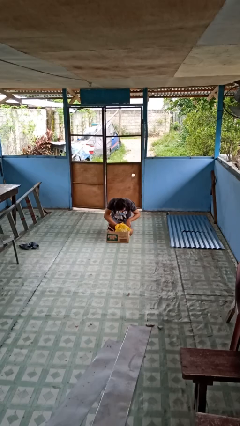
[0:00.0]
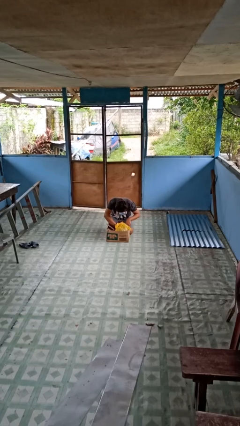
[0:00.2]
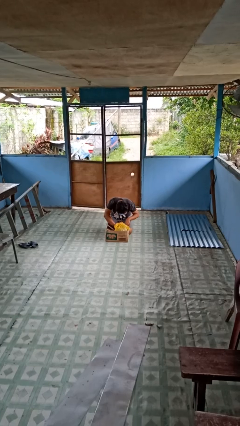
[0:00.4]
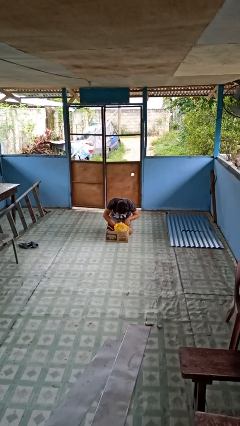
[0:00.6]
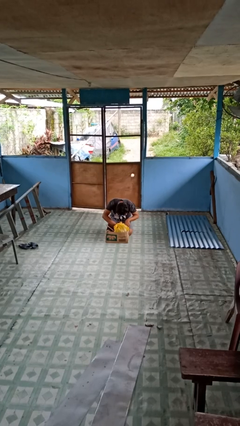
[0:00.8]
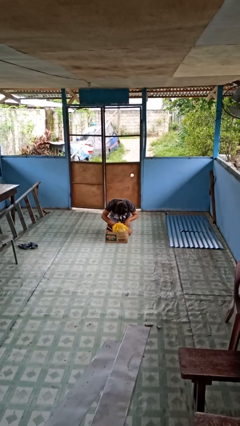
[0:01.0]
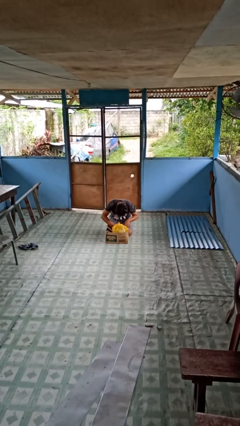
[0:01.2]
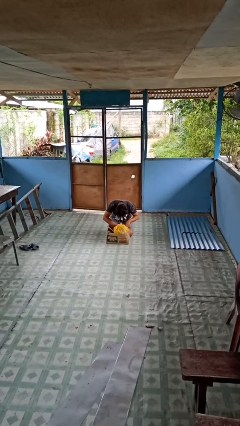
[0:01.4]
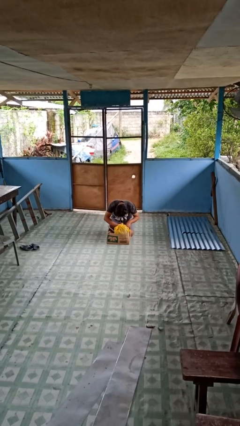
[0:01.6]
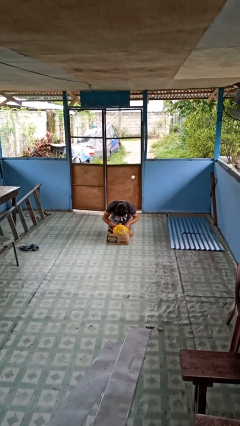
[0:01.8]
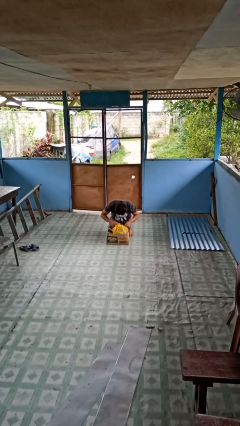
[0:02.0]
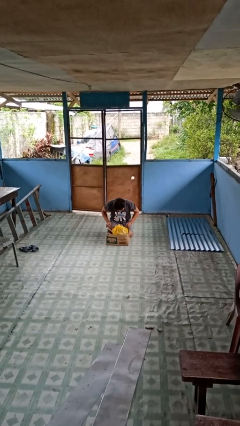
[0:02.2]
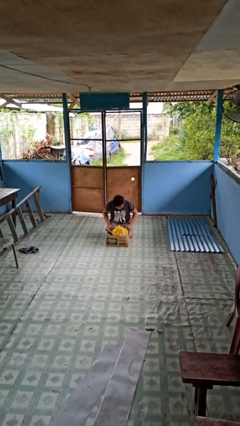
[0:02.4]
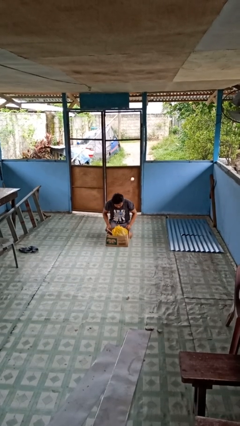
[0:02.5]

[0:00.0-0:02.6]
person searches in box

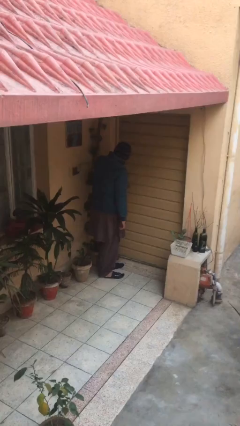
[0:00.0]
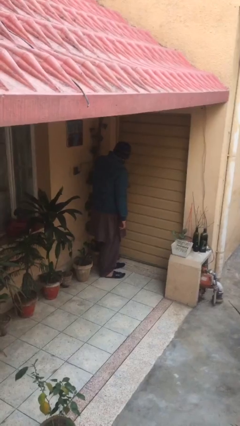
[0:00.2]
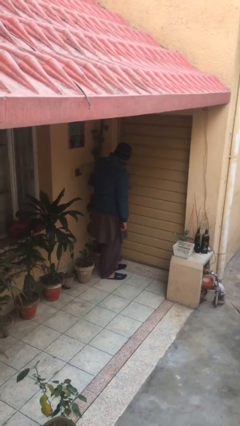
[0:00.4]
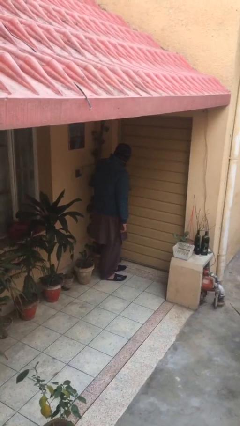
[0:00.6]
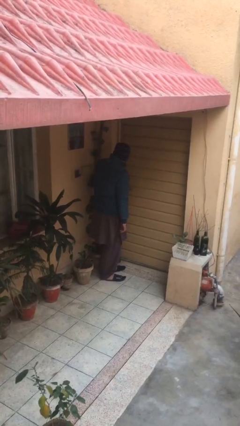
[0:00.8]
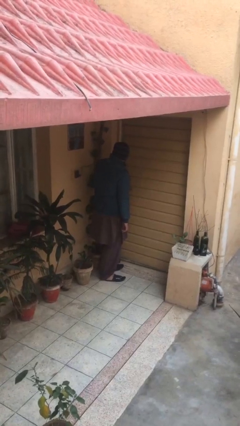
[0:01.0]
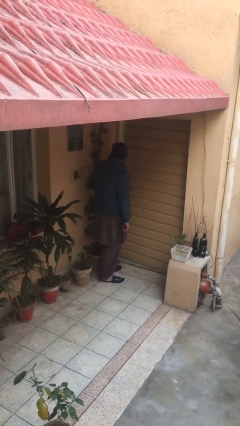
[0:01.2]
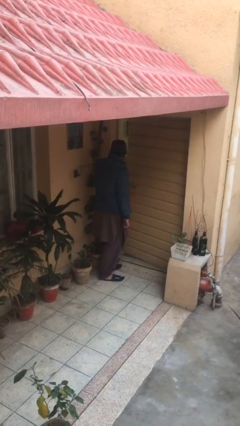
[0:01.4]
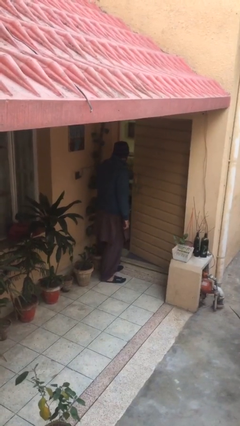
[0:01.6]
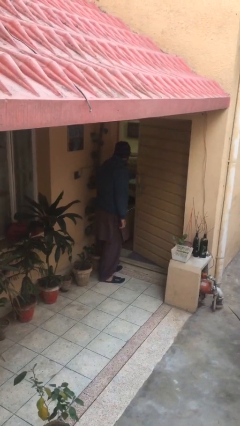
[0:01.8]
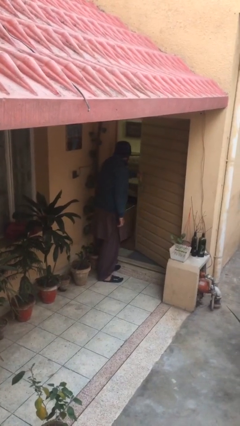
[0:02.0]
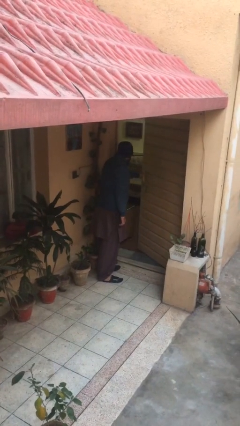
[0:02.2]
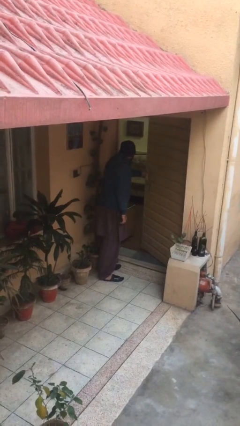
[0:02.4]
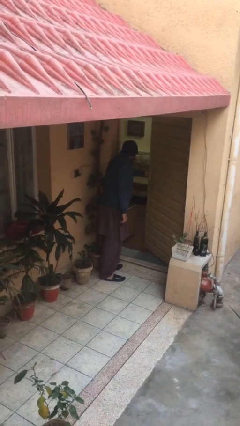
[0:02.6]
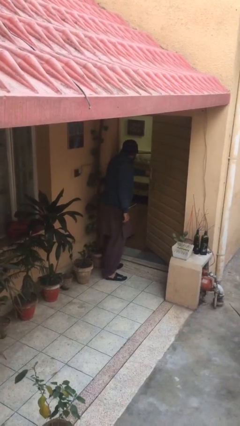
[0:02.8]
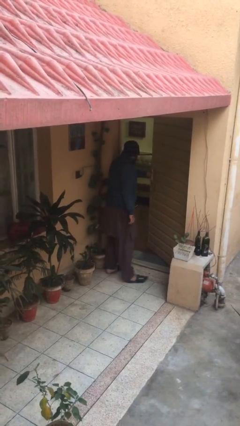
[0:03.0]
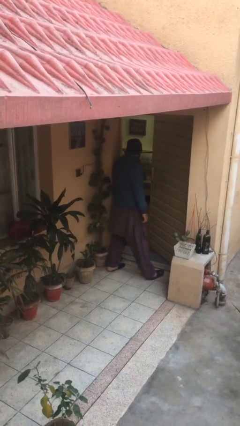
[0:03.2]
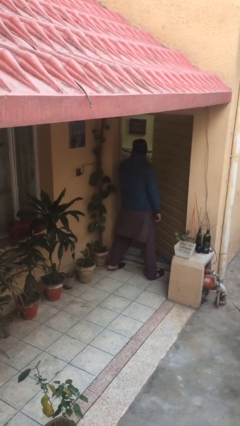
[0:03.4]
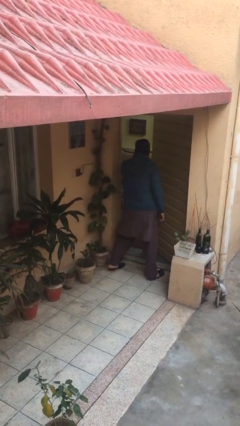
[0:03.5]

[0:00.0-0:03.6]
person opens facility door

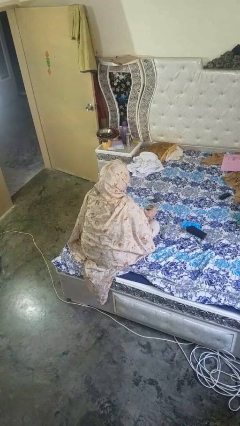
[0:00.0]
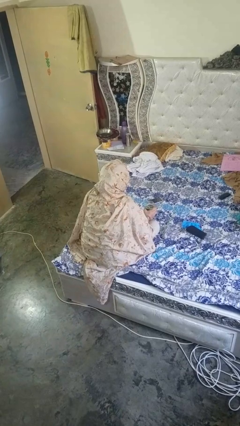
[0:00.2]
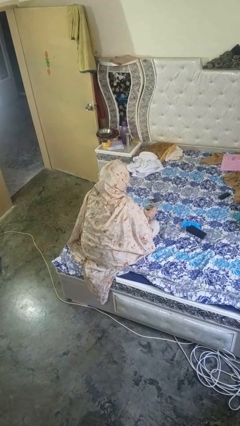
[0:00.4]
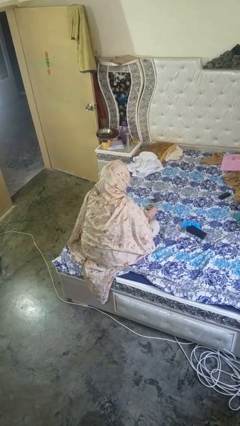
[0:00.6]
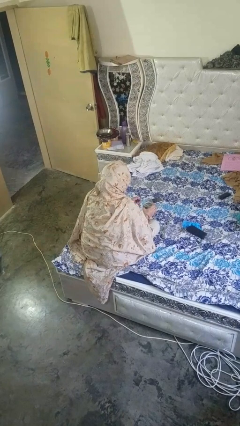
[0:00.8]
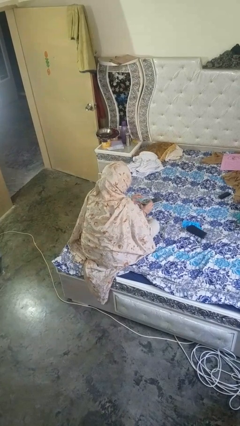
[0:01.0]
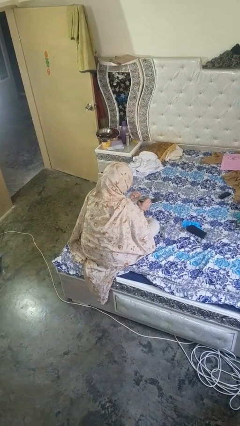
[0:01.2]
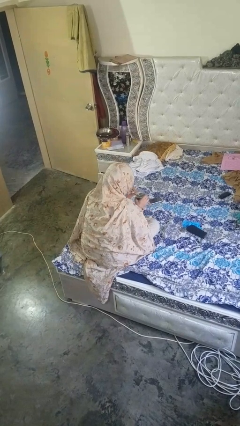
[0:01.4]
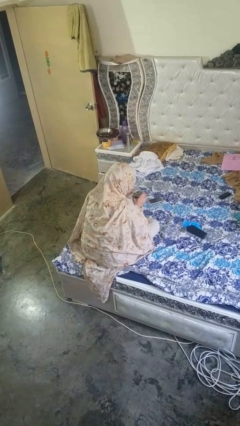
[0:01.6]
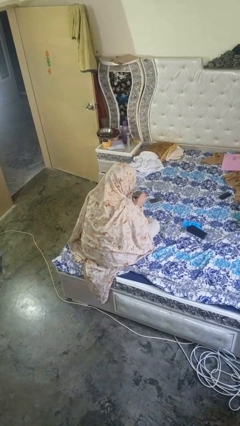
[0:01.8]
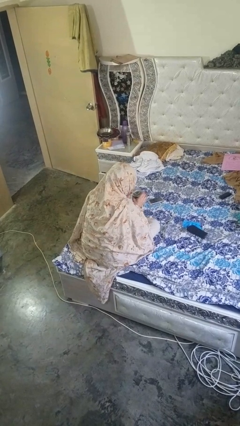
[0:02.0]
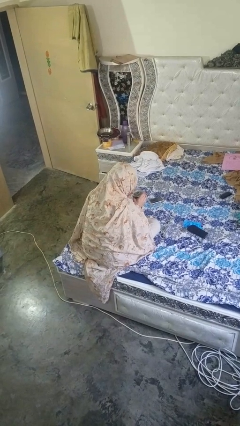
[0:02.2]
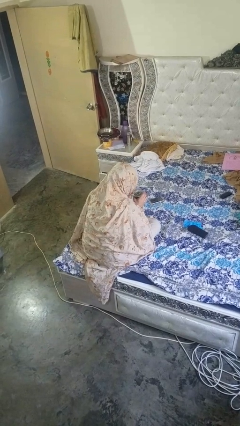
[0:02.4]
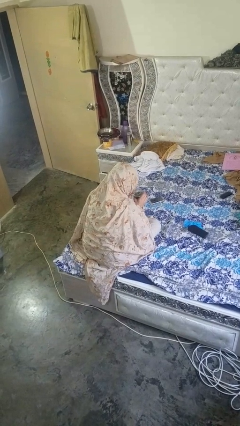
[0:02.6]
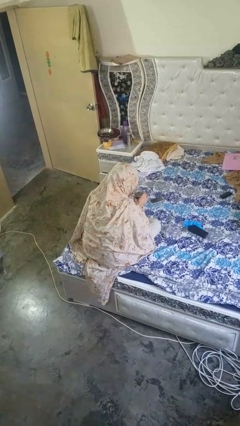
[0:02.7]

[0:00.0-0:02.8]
person drinks from straw

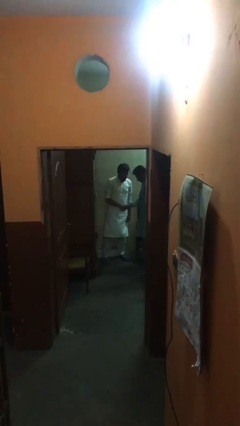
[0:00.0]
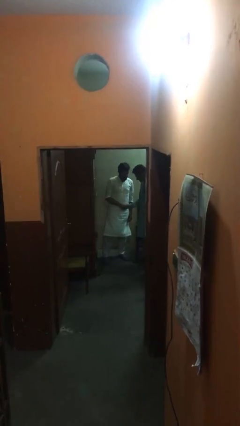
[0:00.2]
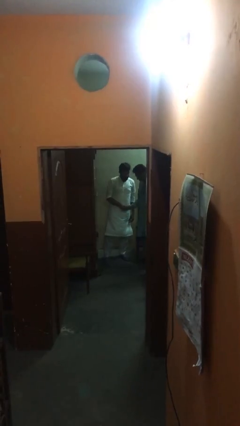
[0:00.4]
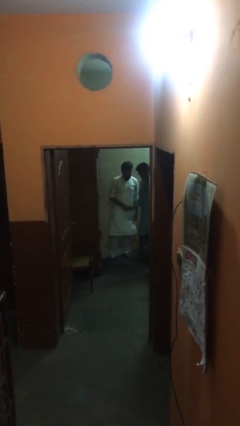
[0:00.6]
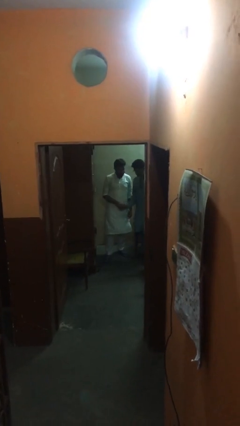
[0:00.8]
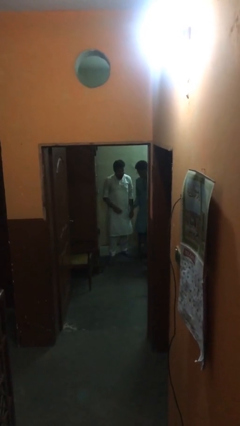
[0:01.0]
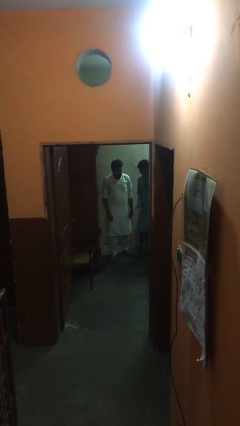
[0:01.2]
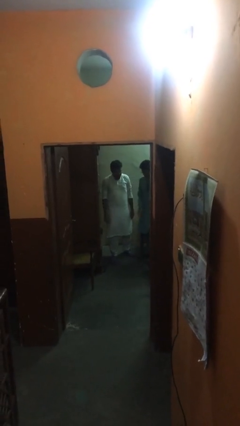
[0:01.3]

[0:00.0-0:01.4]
person shakes hand

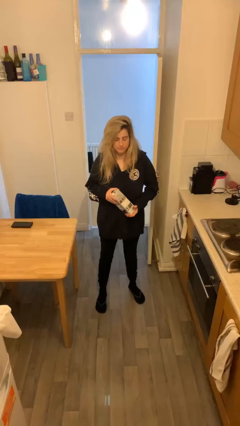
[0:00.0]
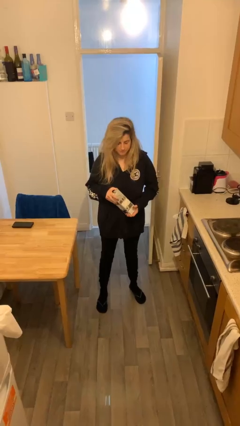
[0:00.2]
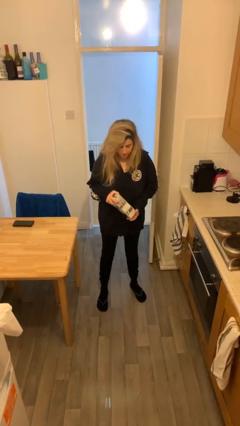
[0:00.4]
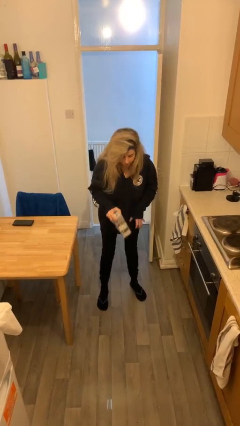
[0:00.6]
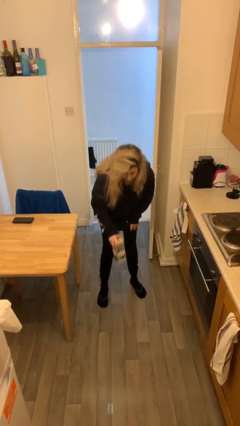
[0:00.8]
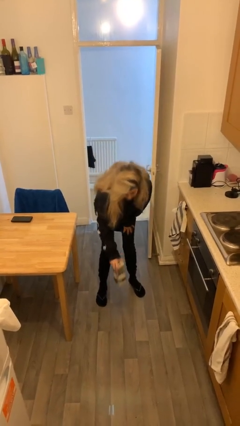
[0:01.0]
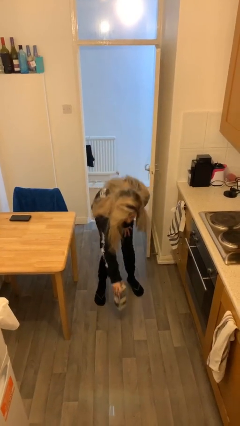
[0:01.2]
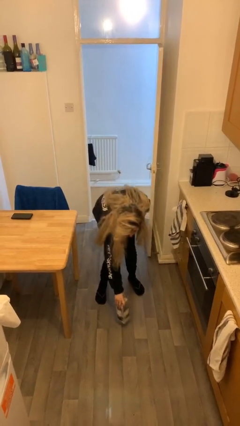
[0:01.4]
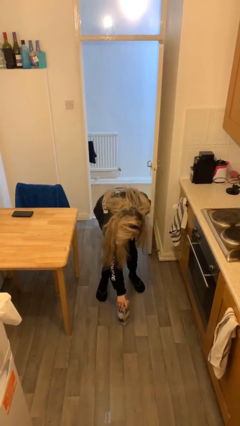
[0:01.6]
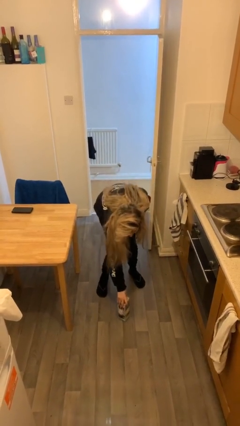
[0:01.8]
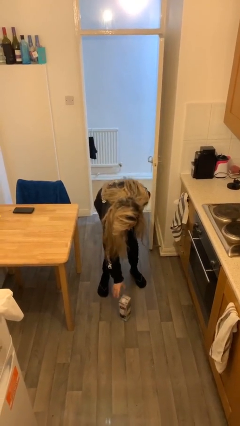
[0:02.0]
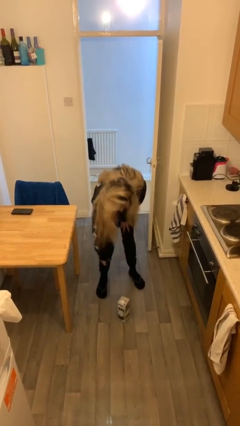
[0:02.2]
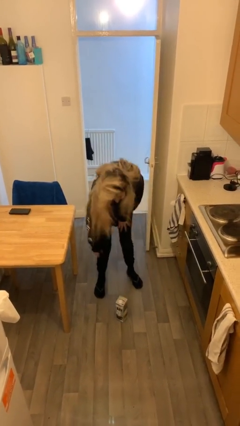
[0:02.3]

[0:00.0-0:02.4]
person puts down object on floor

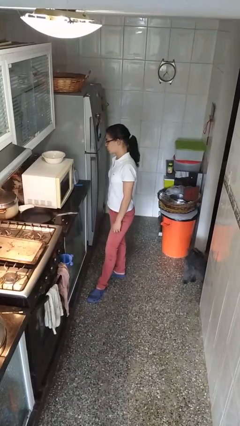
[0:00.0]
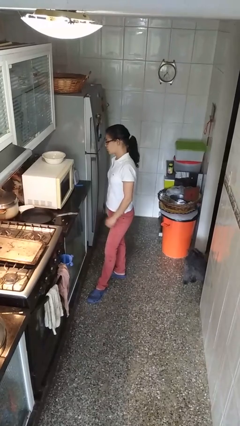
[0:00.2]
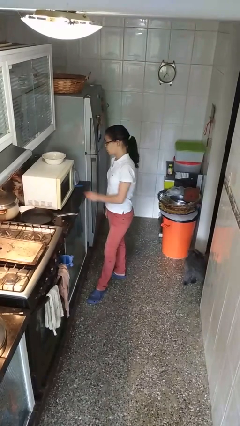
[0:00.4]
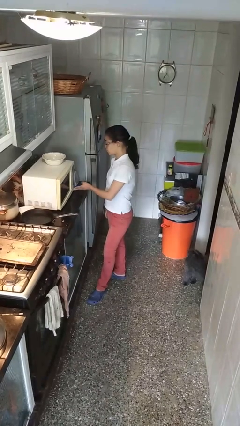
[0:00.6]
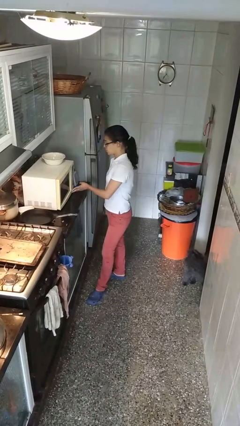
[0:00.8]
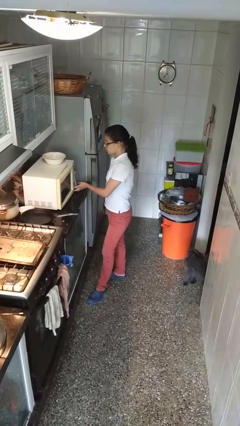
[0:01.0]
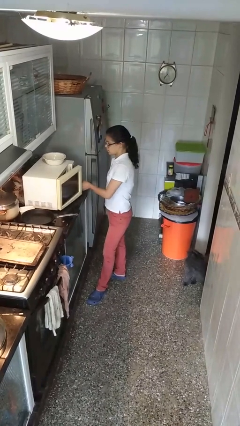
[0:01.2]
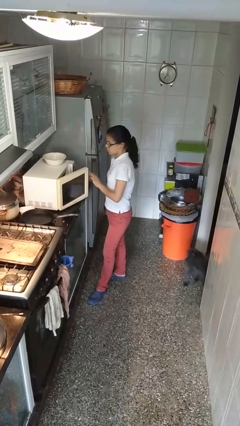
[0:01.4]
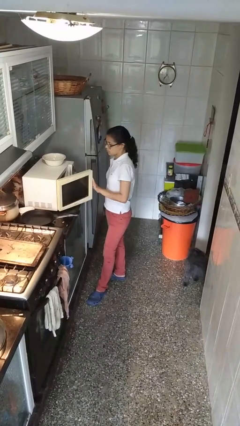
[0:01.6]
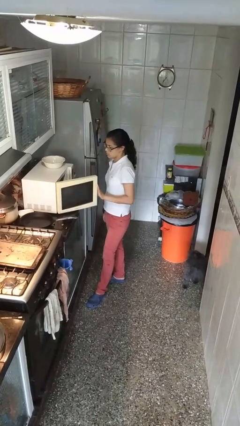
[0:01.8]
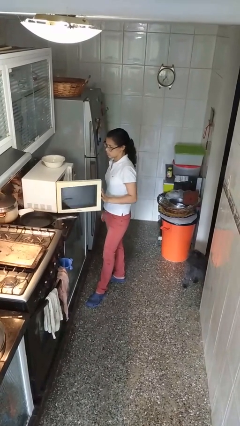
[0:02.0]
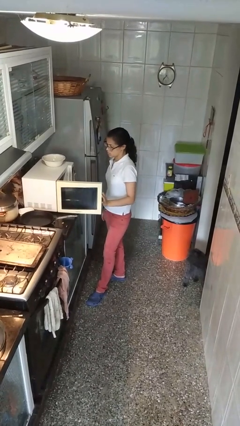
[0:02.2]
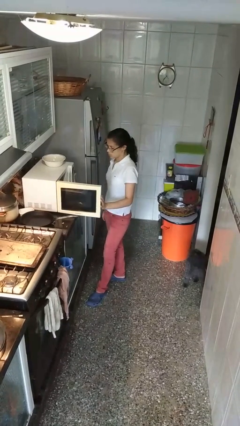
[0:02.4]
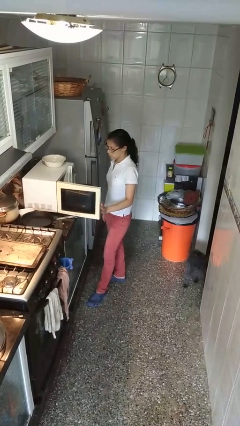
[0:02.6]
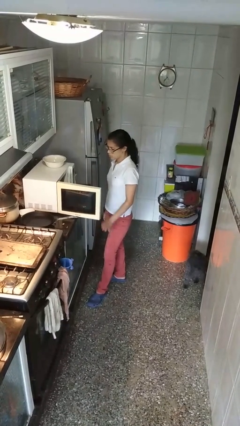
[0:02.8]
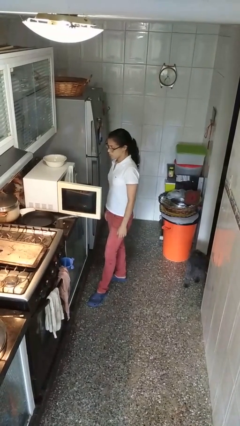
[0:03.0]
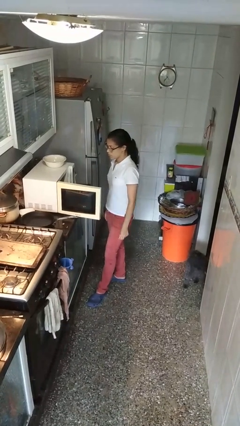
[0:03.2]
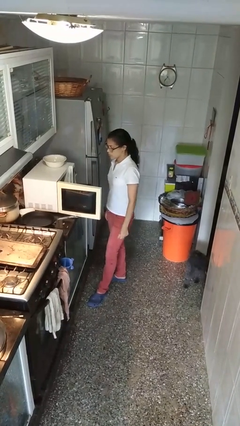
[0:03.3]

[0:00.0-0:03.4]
person opens microwave

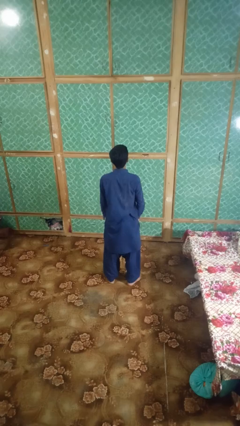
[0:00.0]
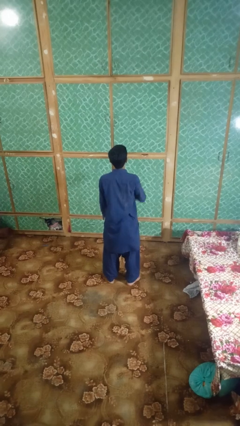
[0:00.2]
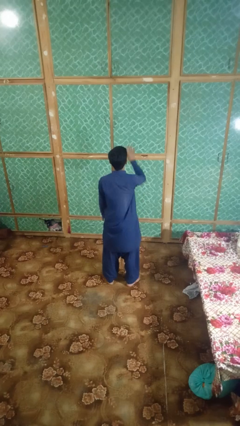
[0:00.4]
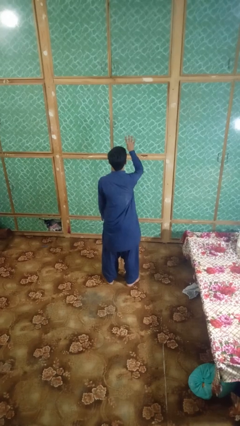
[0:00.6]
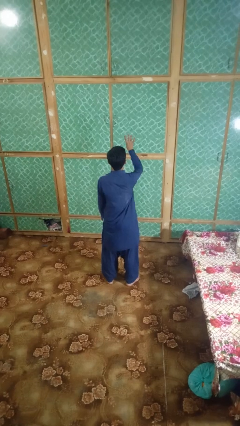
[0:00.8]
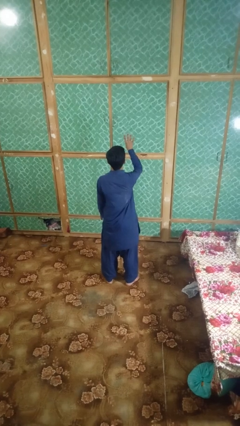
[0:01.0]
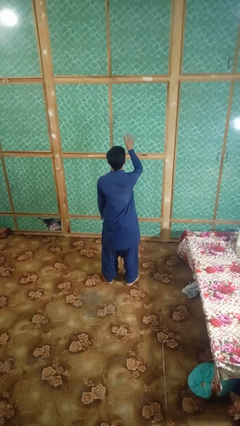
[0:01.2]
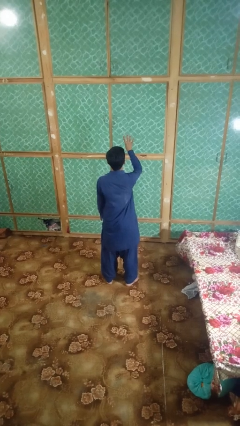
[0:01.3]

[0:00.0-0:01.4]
person gestures number four
